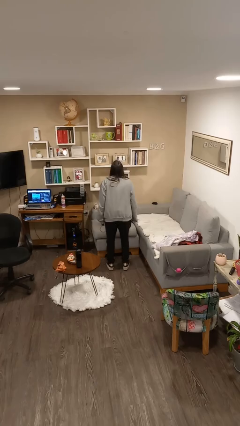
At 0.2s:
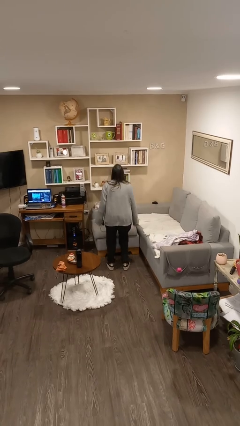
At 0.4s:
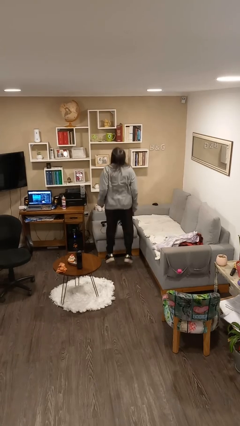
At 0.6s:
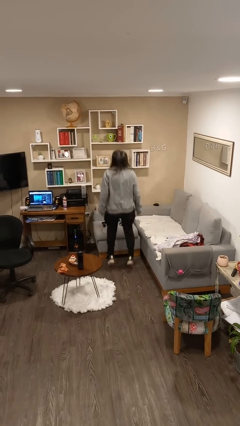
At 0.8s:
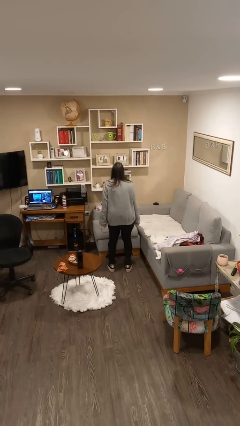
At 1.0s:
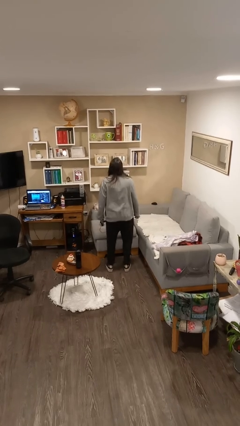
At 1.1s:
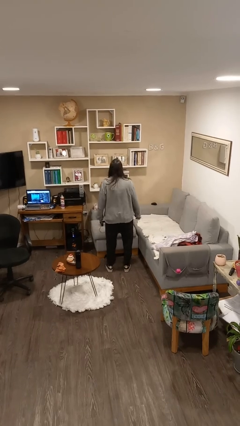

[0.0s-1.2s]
person jumps

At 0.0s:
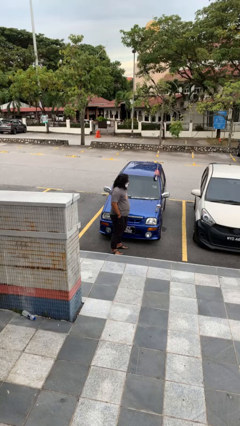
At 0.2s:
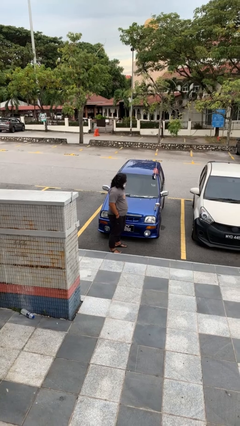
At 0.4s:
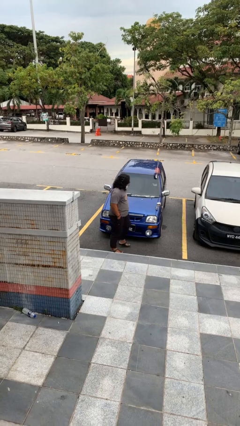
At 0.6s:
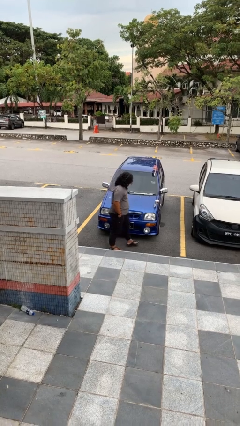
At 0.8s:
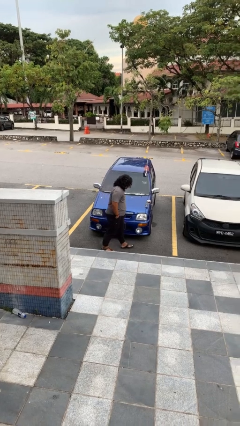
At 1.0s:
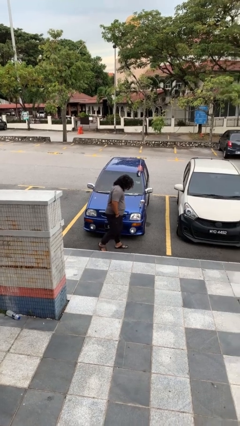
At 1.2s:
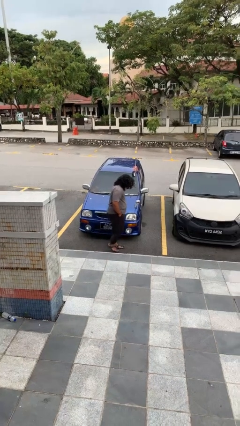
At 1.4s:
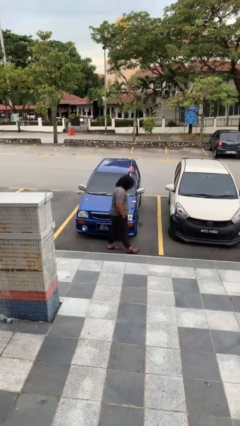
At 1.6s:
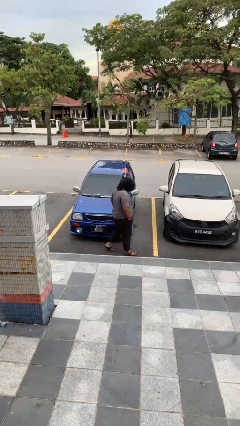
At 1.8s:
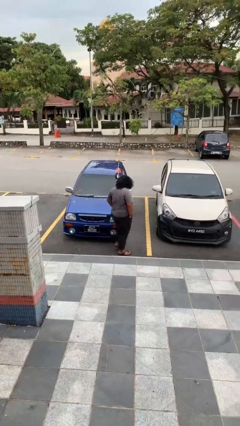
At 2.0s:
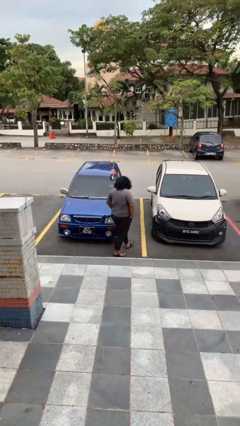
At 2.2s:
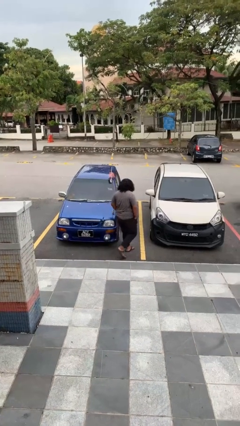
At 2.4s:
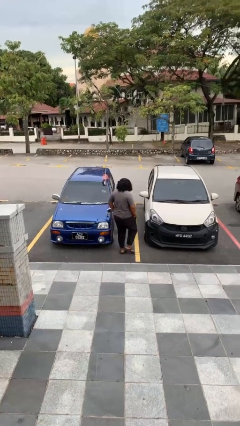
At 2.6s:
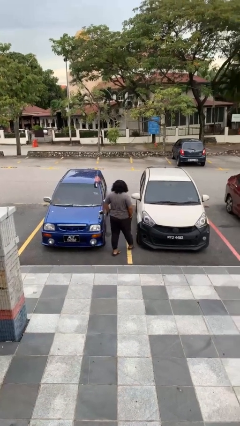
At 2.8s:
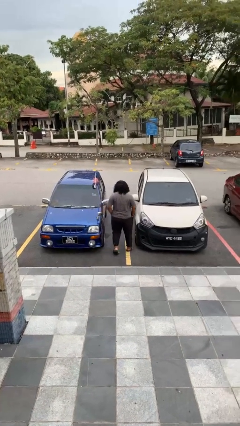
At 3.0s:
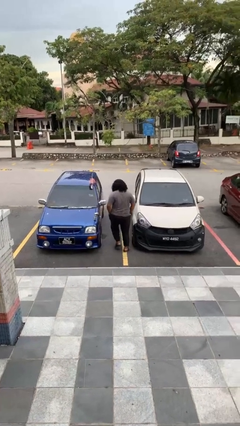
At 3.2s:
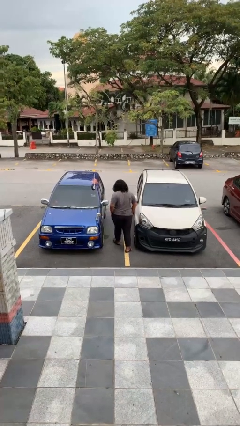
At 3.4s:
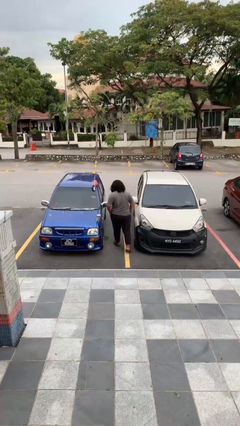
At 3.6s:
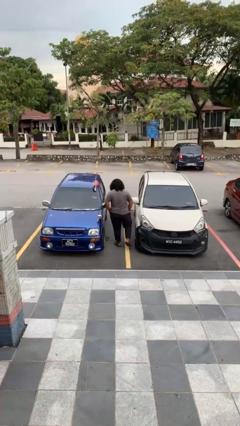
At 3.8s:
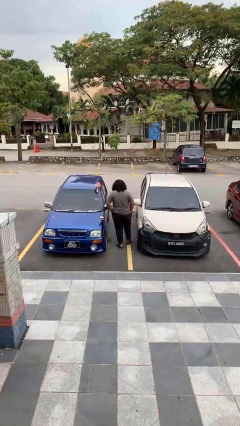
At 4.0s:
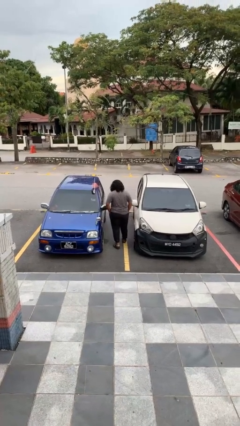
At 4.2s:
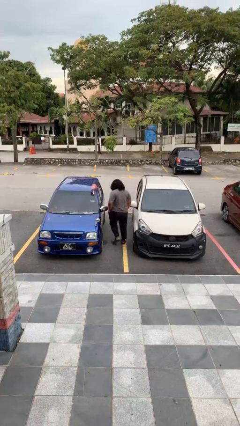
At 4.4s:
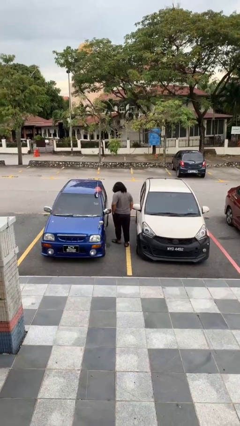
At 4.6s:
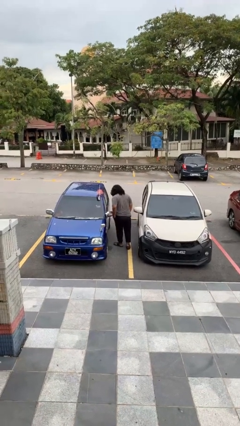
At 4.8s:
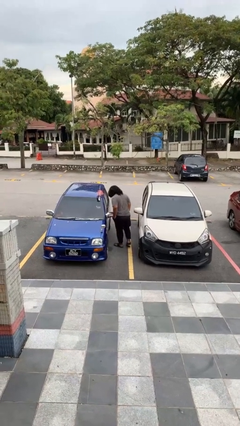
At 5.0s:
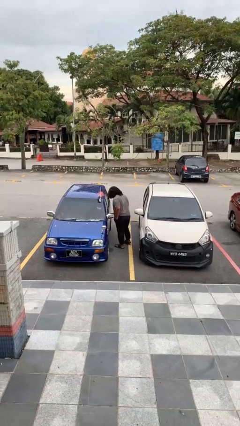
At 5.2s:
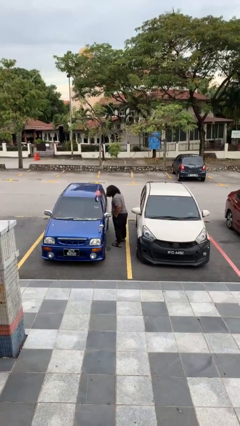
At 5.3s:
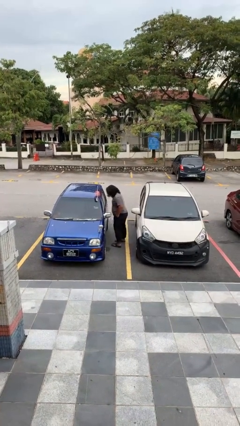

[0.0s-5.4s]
person walks around car

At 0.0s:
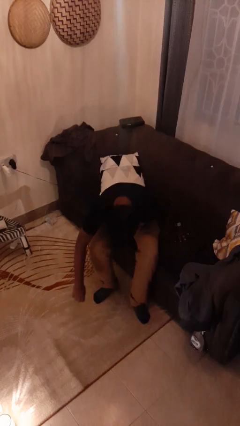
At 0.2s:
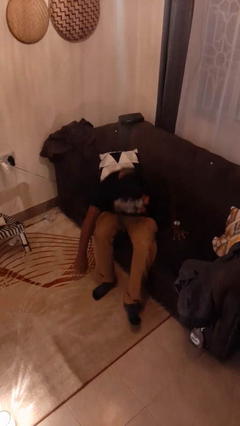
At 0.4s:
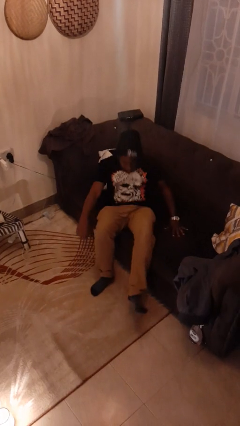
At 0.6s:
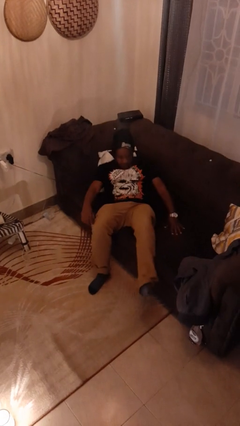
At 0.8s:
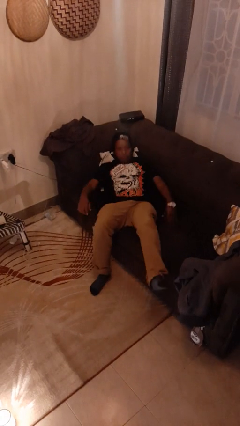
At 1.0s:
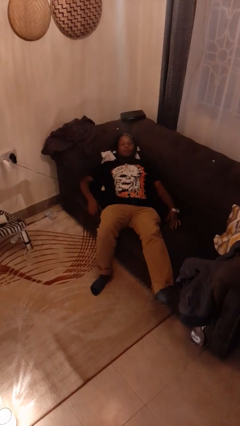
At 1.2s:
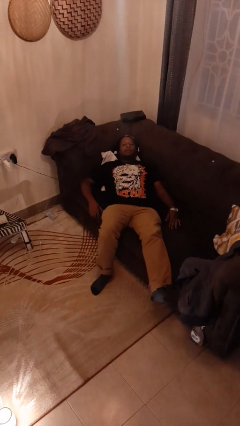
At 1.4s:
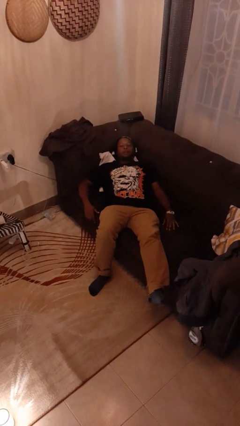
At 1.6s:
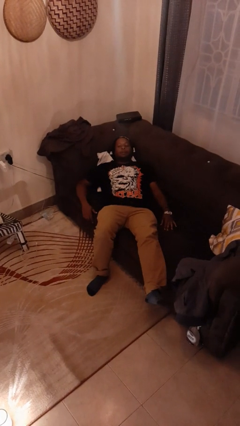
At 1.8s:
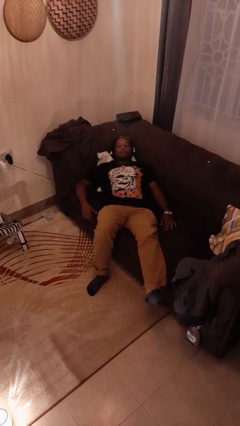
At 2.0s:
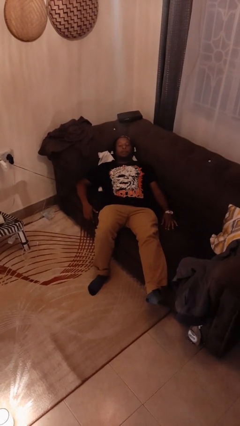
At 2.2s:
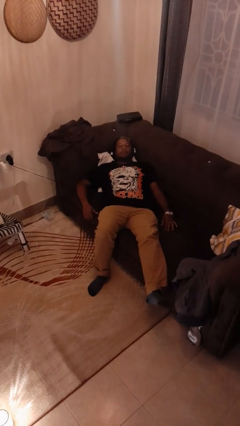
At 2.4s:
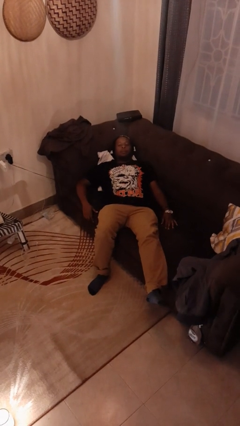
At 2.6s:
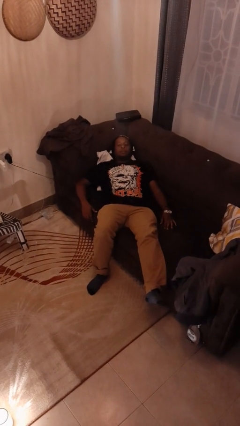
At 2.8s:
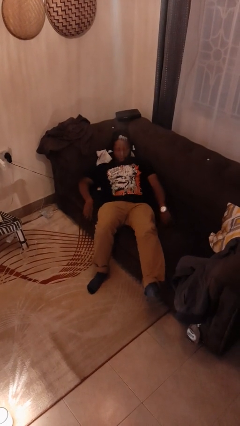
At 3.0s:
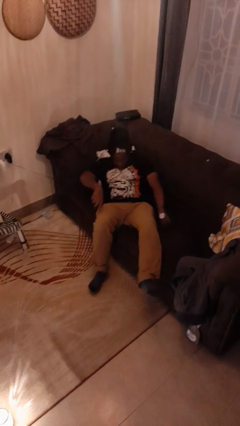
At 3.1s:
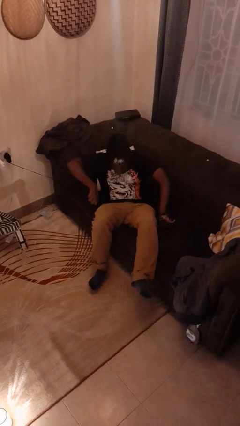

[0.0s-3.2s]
person lies down on couch

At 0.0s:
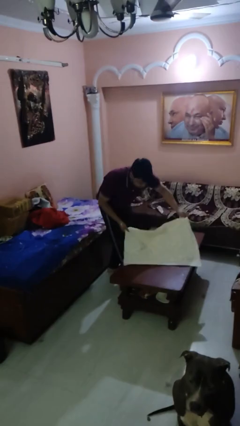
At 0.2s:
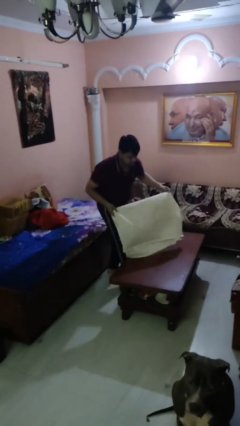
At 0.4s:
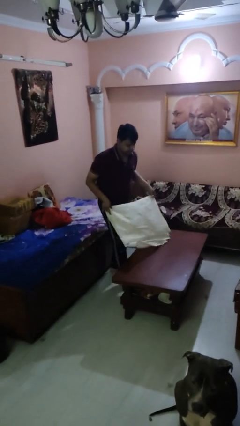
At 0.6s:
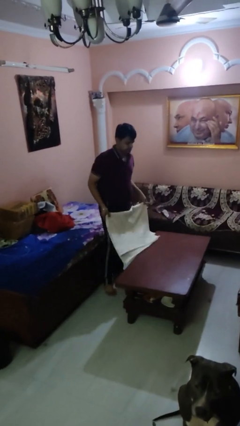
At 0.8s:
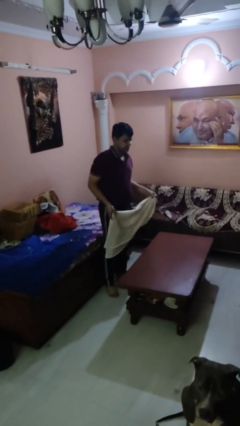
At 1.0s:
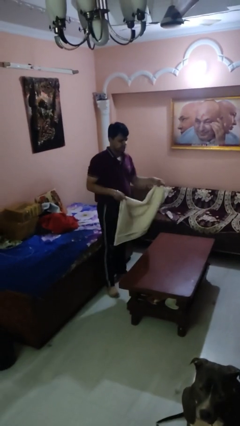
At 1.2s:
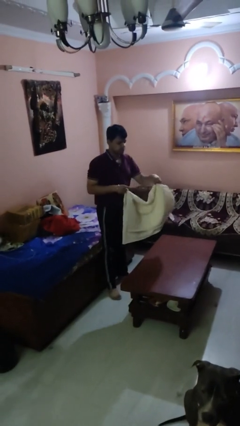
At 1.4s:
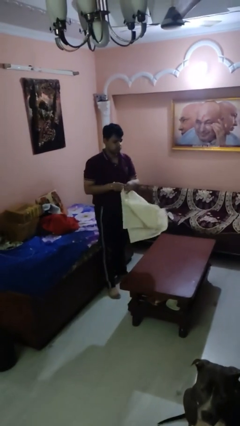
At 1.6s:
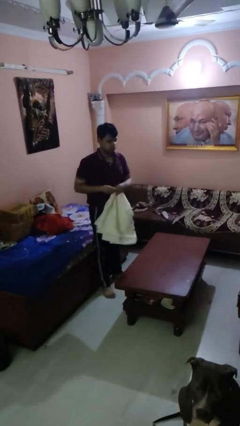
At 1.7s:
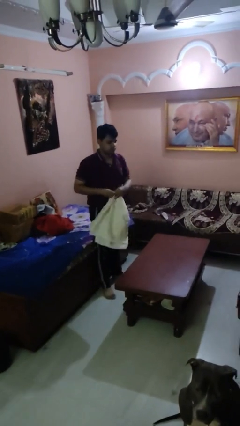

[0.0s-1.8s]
person folds tablecloth

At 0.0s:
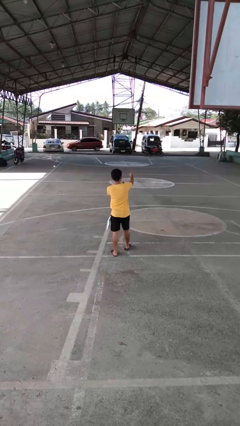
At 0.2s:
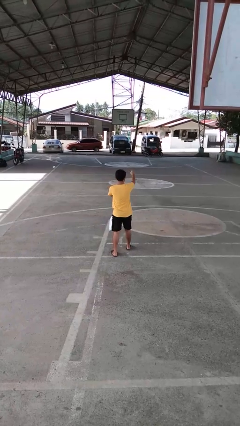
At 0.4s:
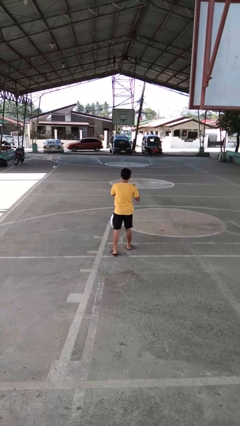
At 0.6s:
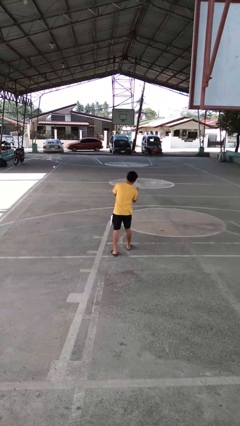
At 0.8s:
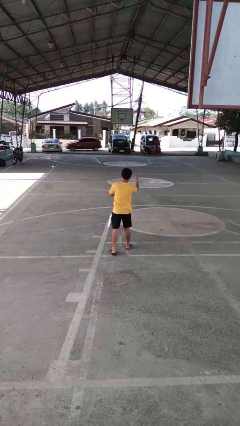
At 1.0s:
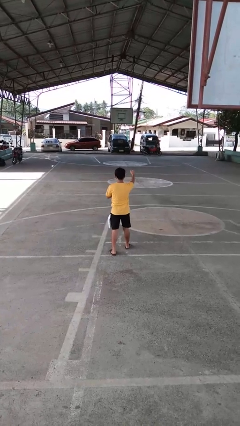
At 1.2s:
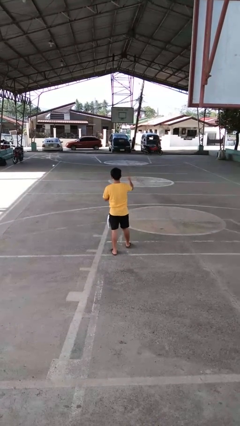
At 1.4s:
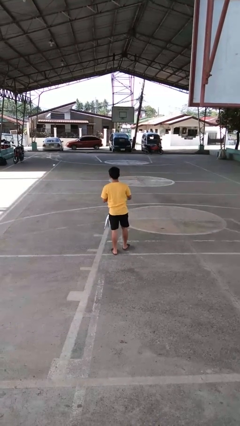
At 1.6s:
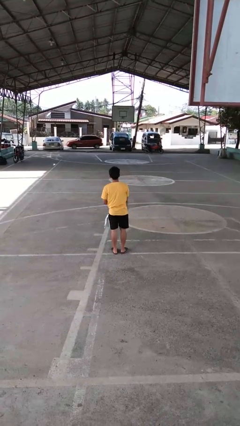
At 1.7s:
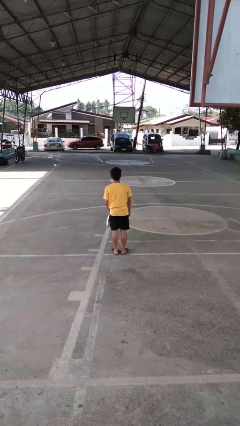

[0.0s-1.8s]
person punches

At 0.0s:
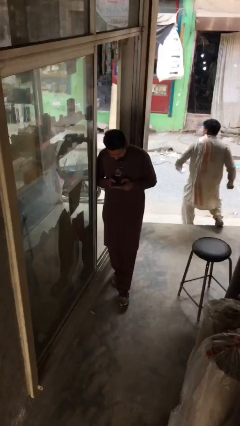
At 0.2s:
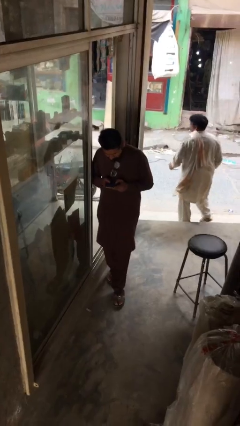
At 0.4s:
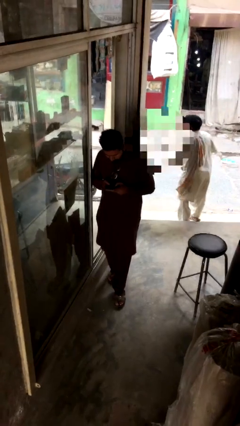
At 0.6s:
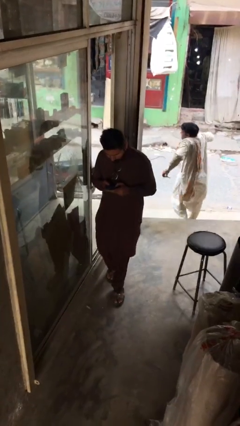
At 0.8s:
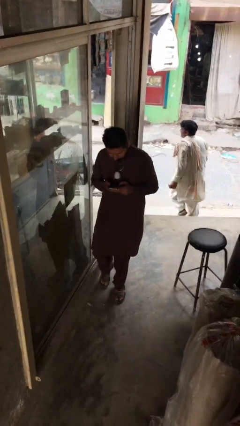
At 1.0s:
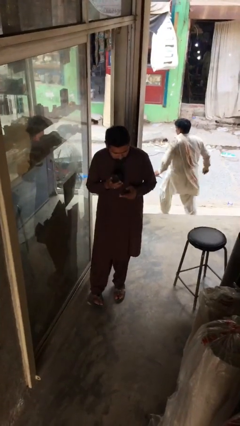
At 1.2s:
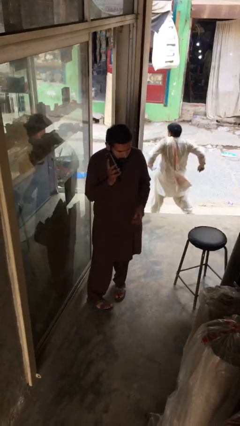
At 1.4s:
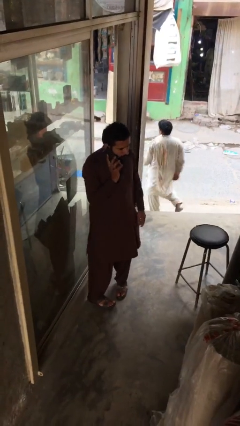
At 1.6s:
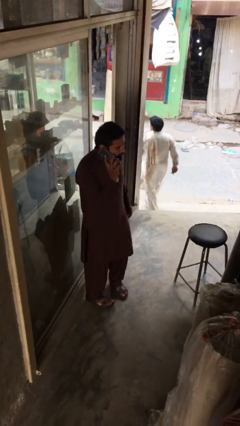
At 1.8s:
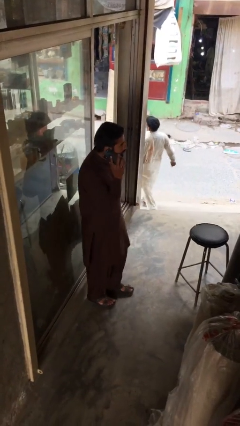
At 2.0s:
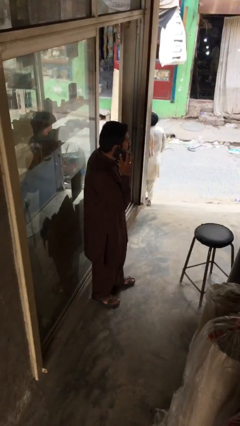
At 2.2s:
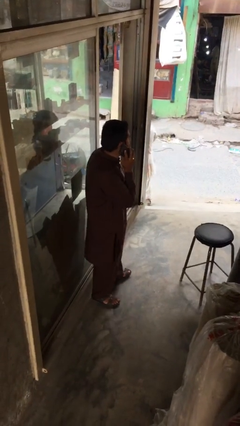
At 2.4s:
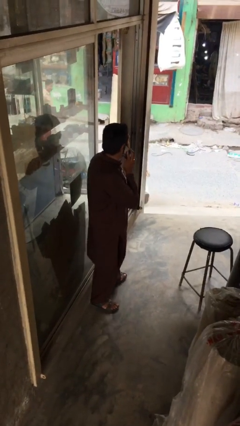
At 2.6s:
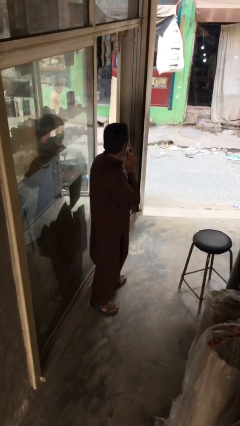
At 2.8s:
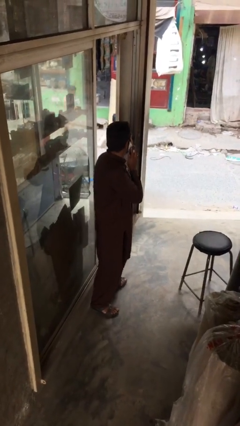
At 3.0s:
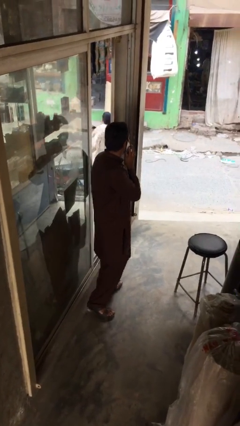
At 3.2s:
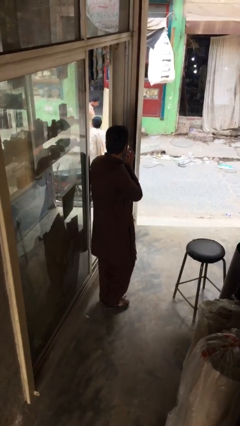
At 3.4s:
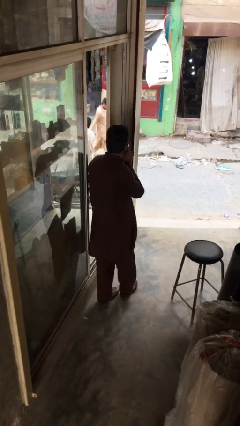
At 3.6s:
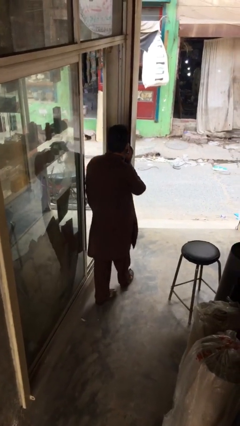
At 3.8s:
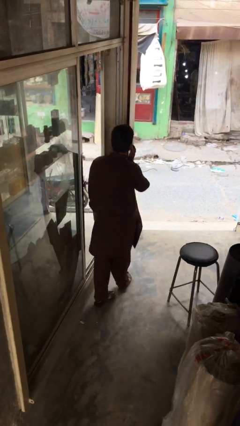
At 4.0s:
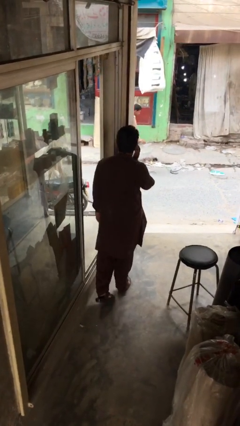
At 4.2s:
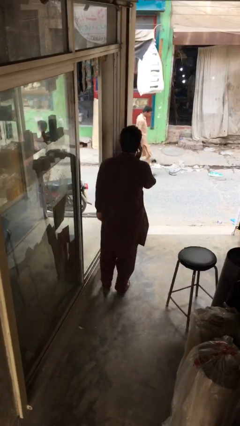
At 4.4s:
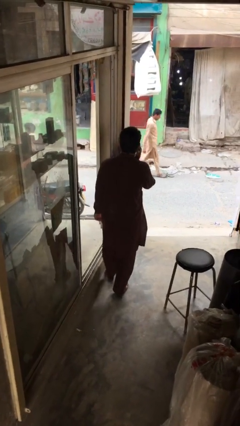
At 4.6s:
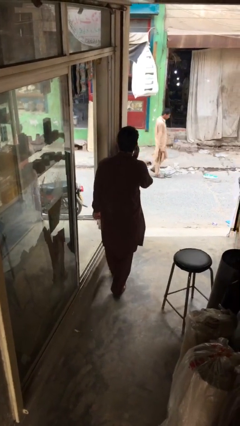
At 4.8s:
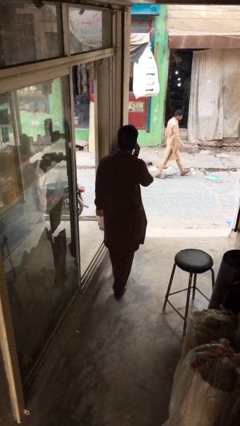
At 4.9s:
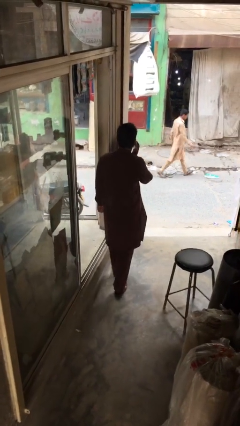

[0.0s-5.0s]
person talks on phone
